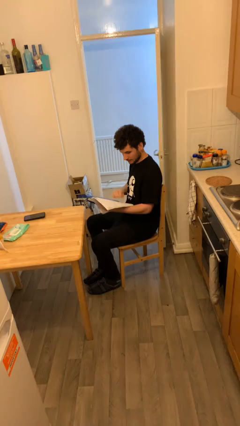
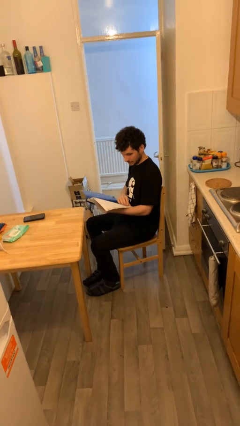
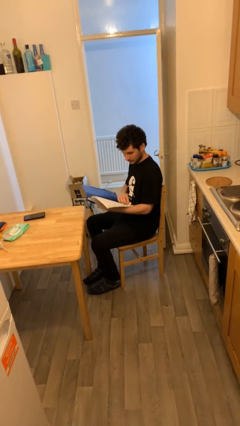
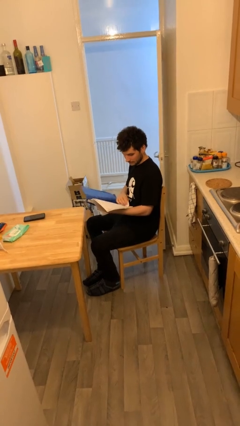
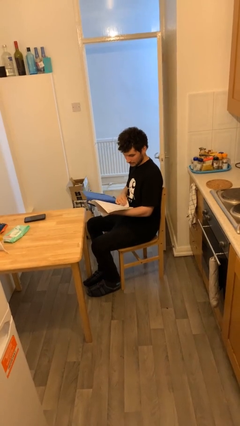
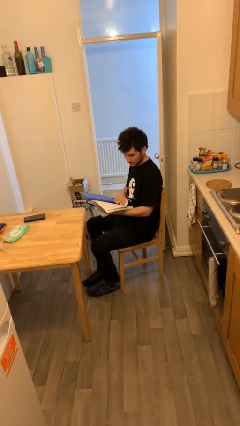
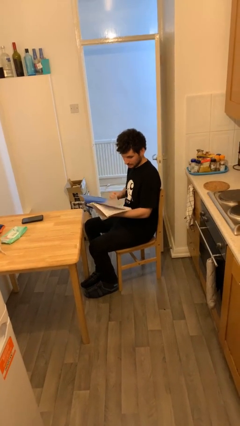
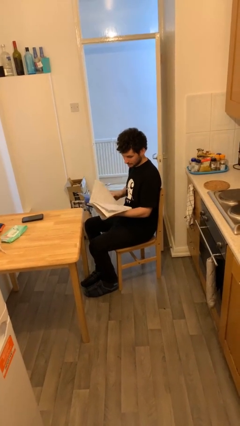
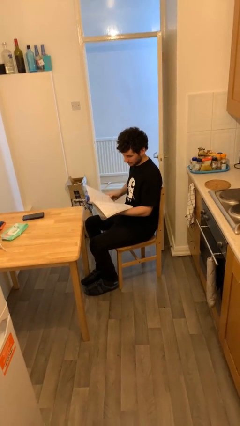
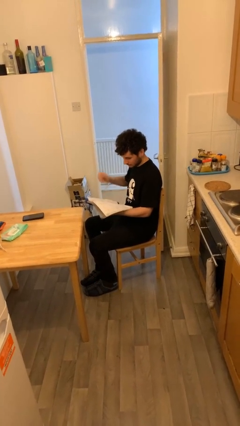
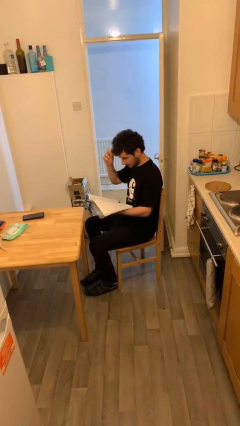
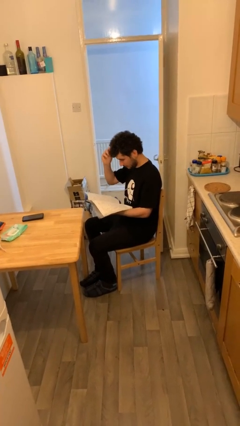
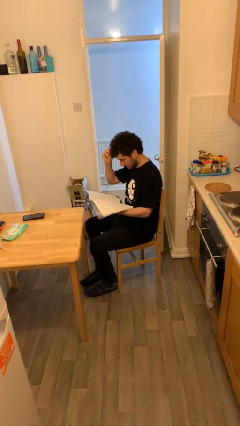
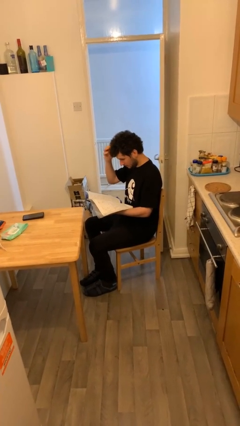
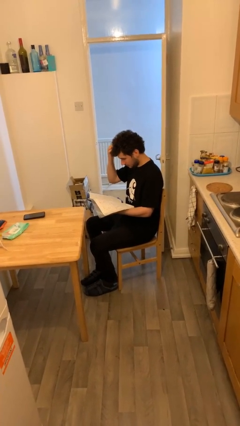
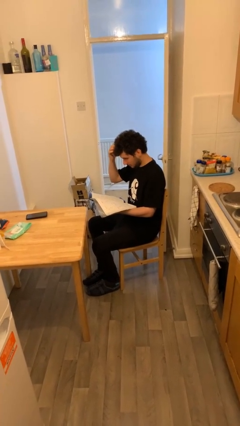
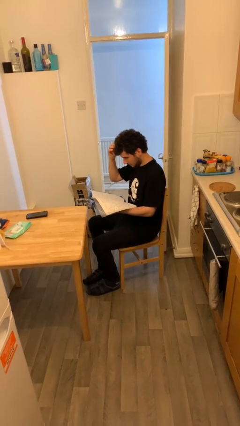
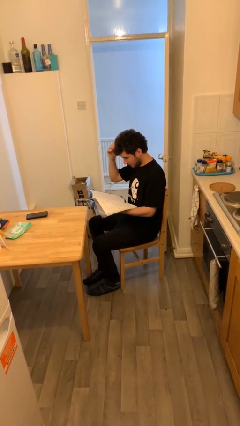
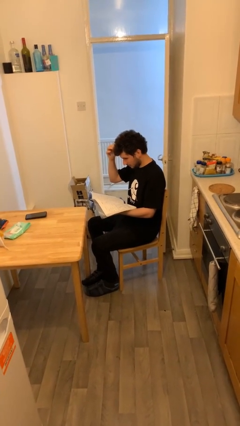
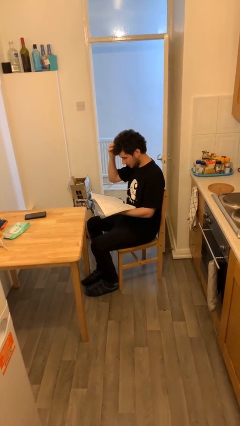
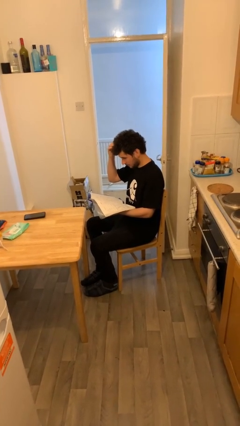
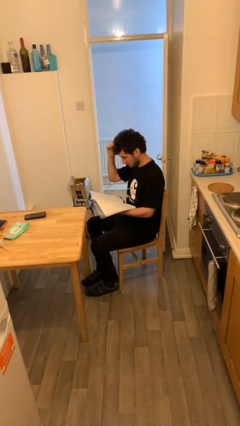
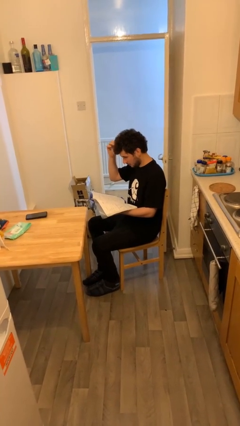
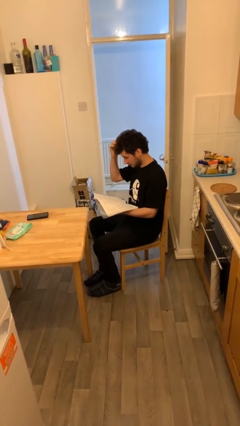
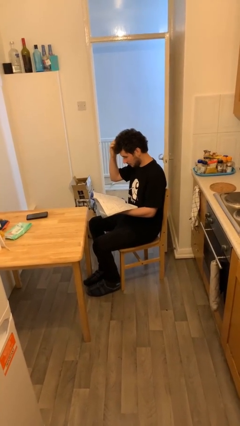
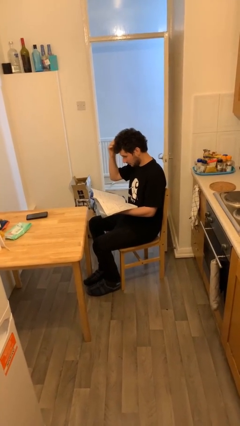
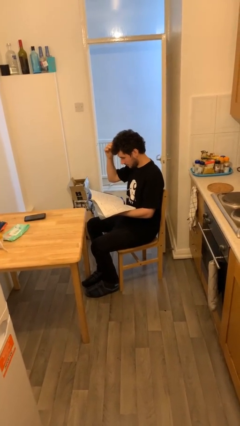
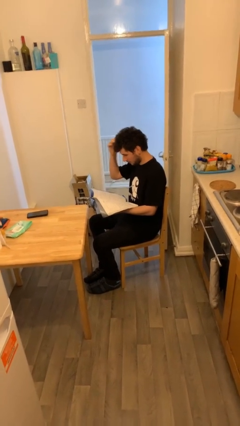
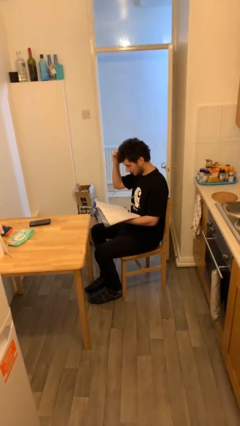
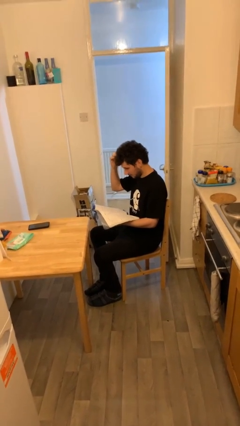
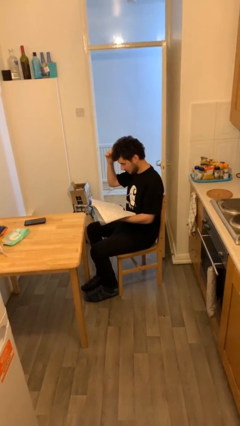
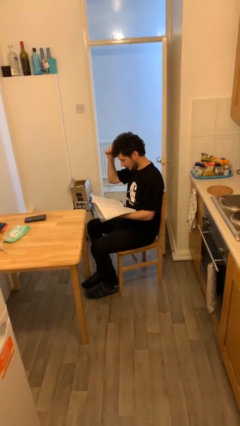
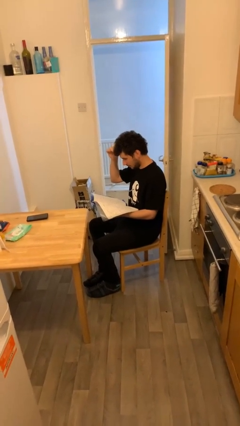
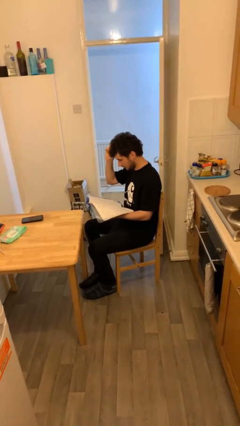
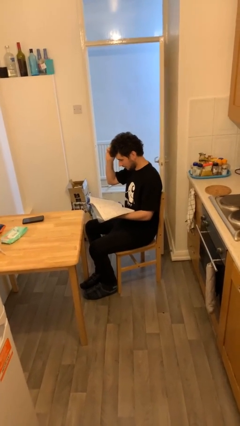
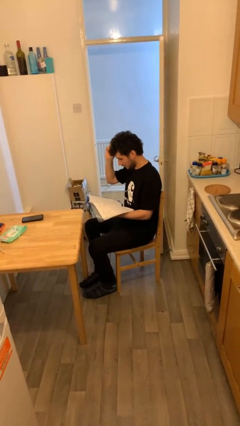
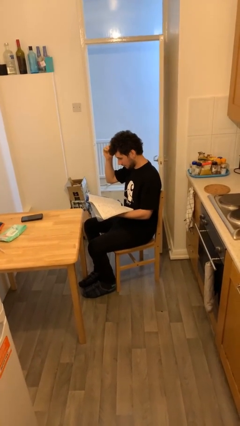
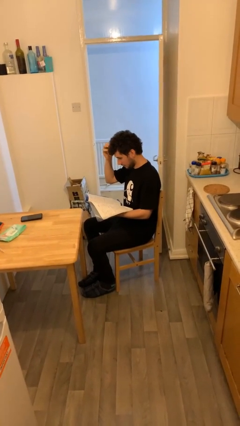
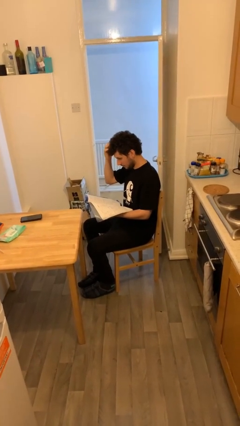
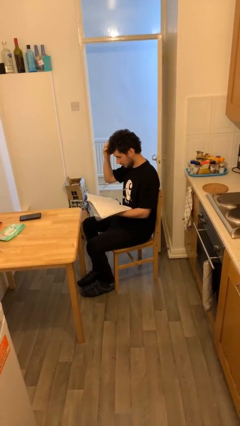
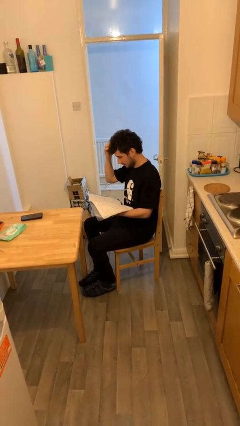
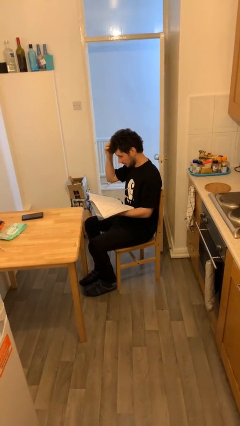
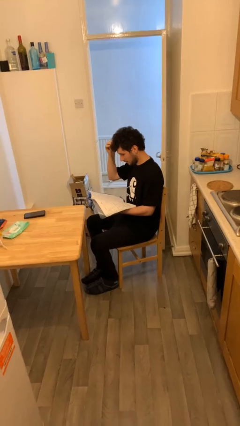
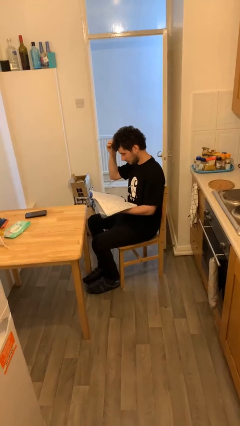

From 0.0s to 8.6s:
person reads document

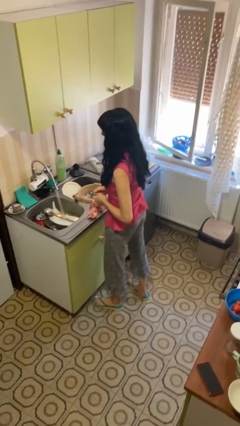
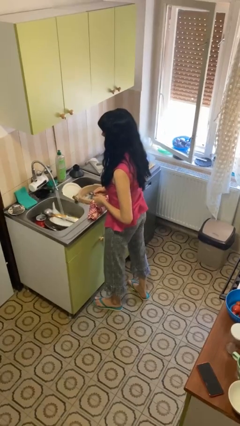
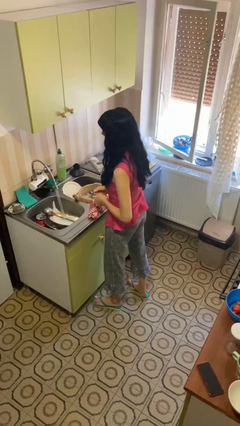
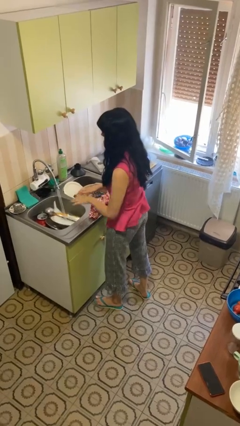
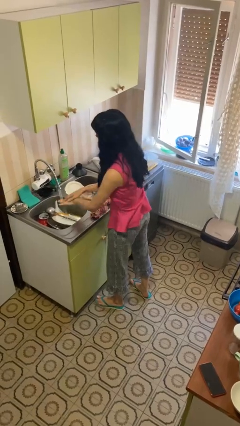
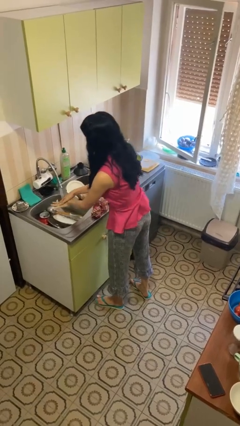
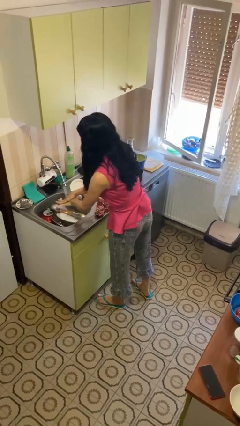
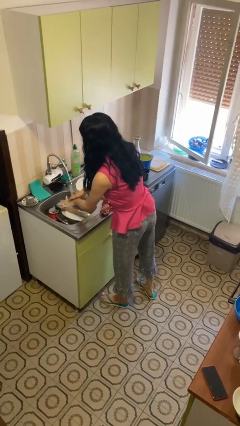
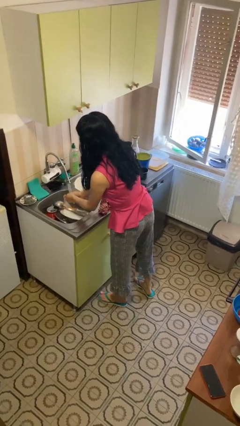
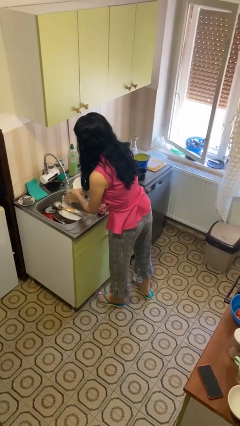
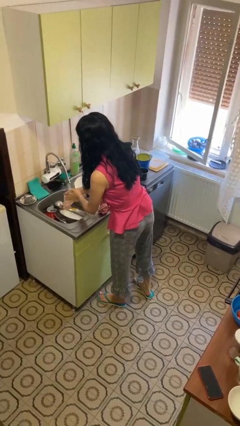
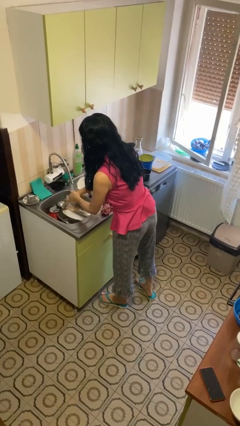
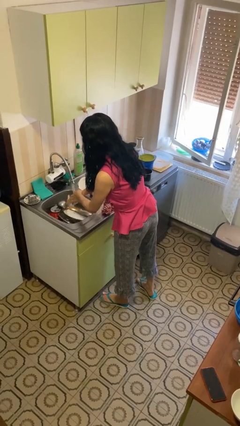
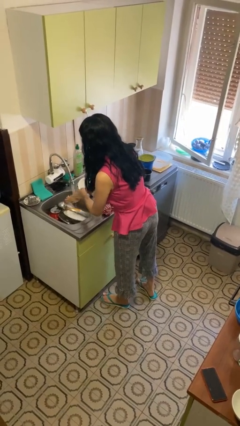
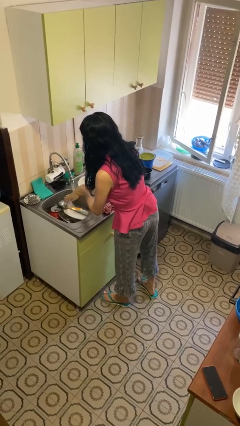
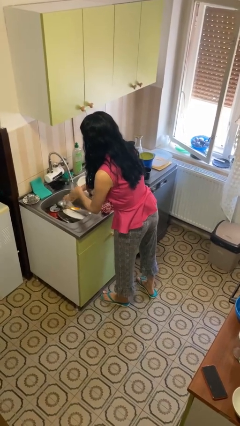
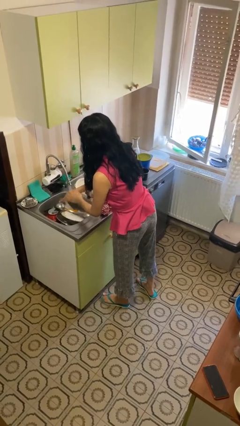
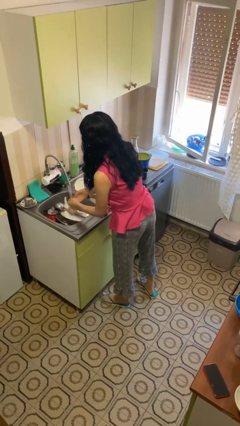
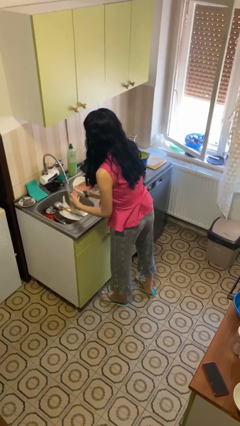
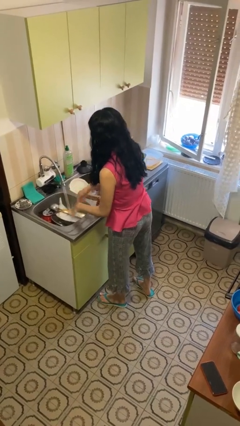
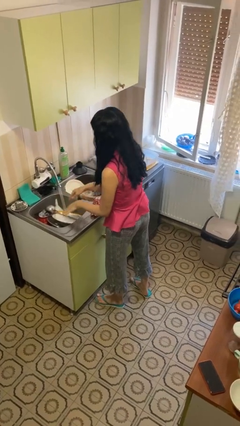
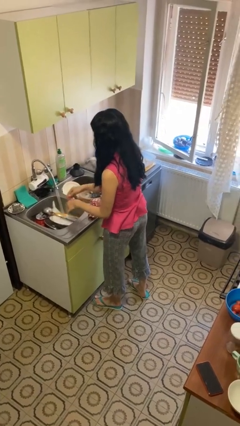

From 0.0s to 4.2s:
person washes hands

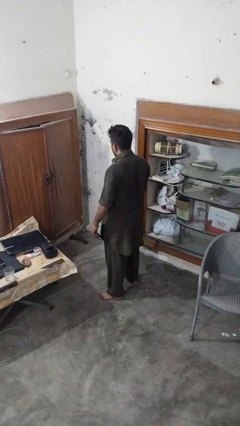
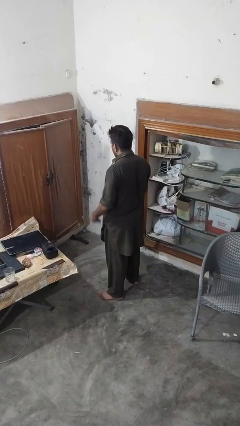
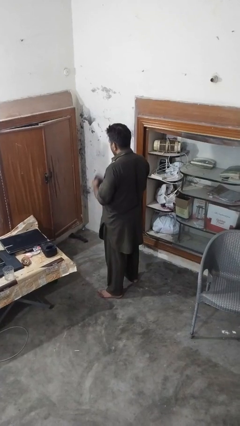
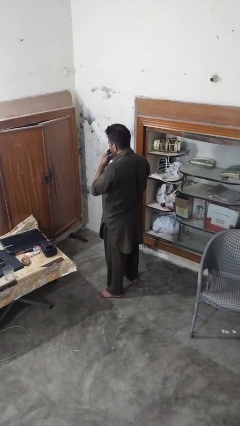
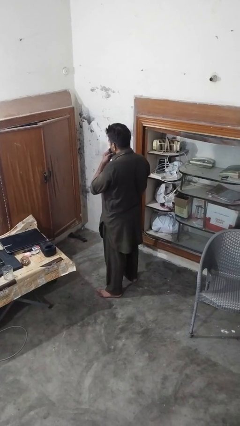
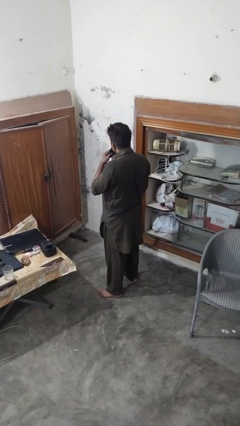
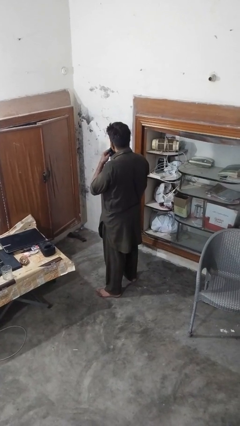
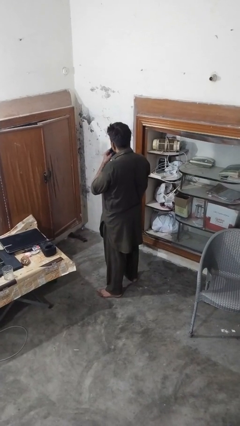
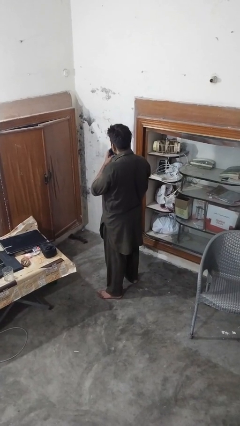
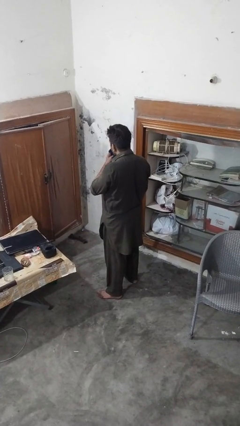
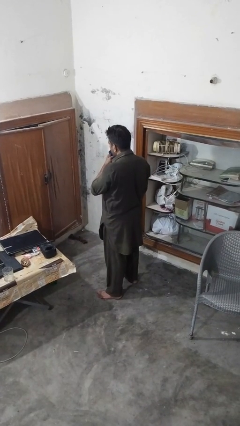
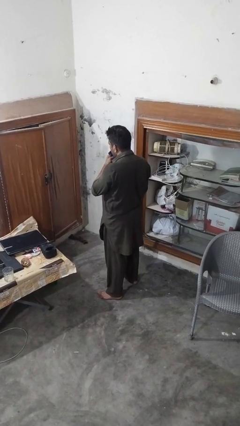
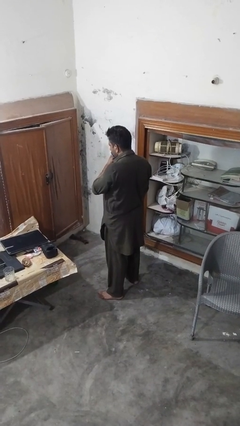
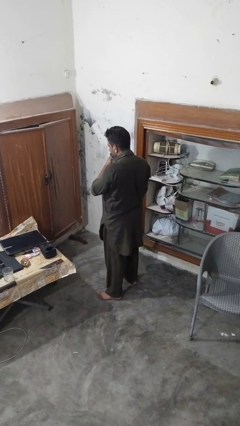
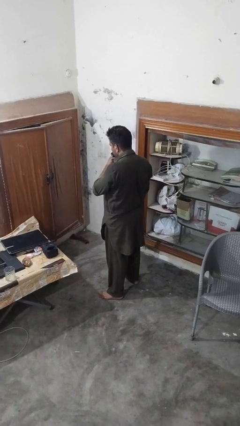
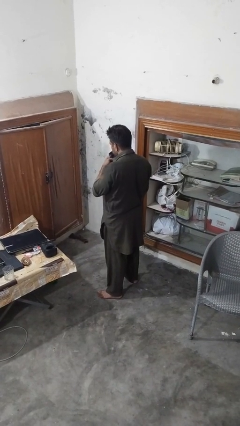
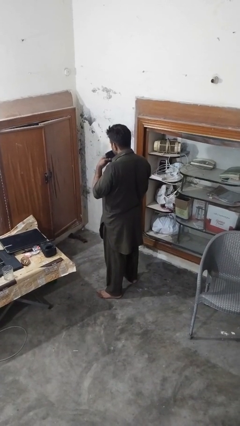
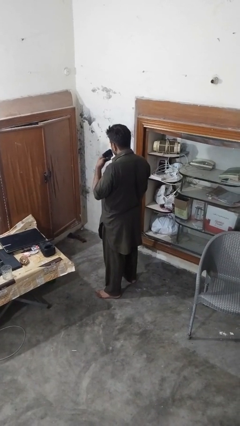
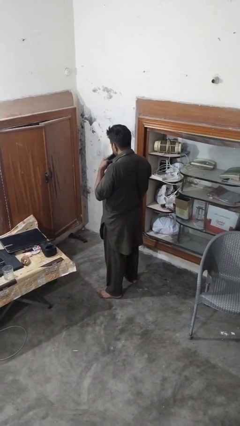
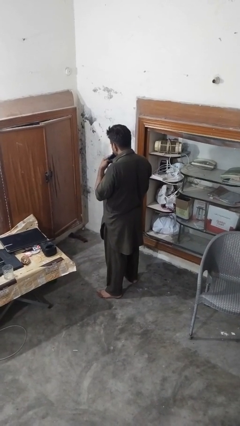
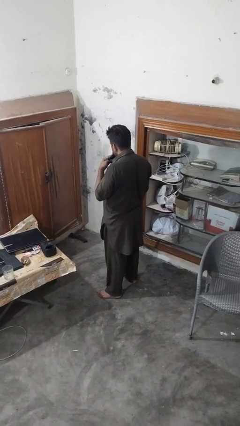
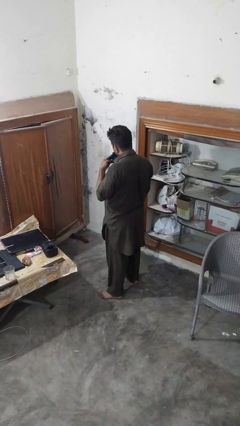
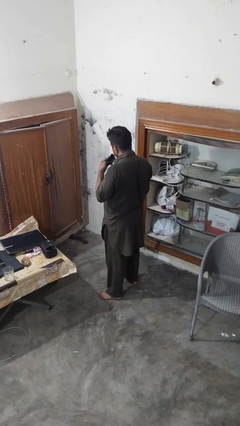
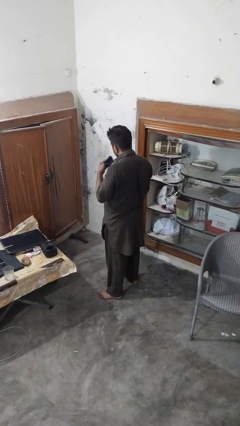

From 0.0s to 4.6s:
person wipes mouth with napkin

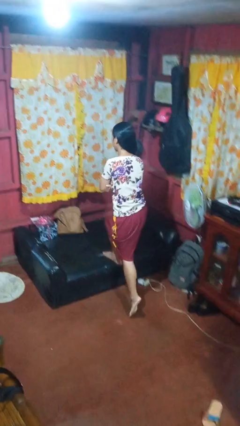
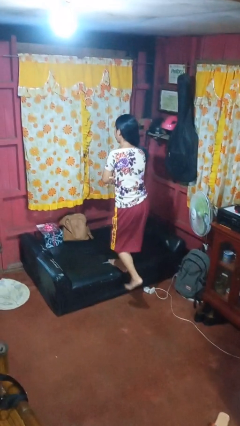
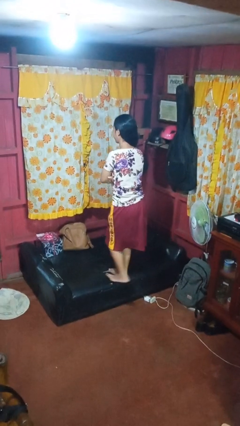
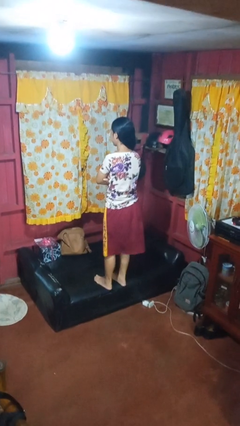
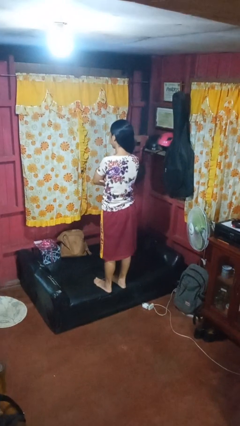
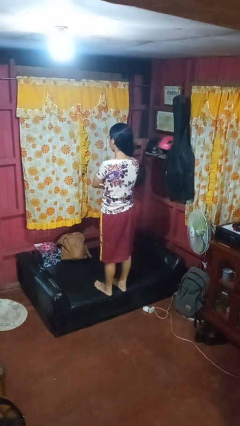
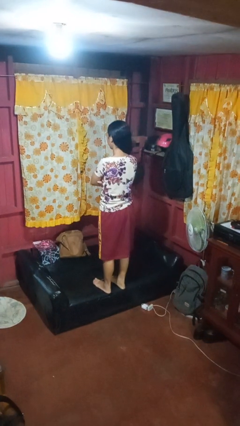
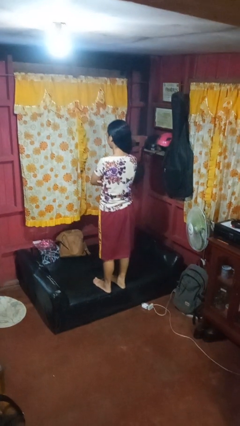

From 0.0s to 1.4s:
person climbs on couch
